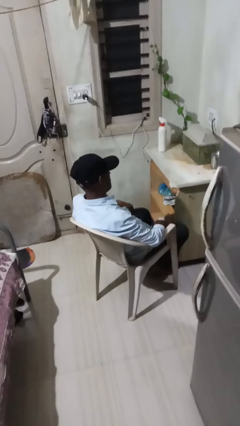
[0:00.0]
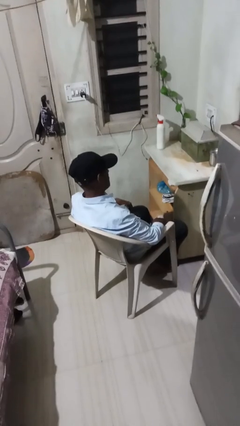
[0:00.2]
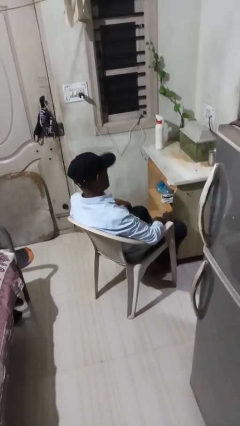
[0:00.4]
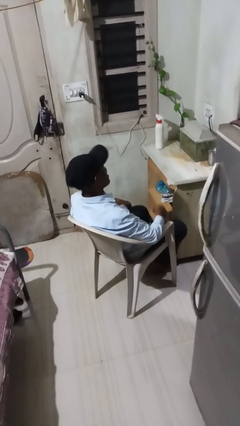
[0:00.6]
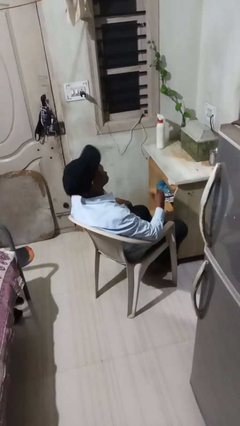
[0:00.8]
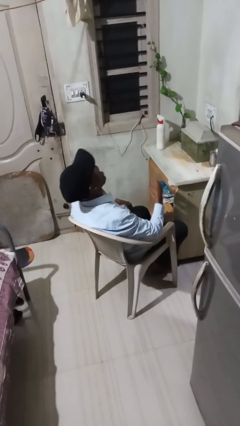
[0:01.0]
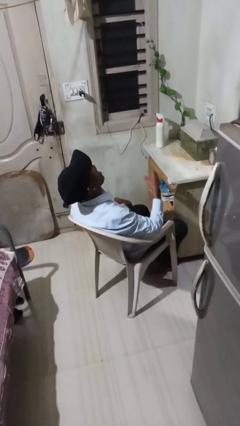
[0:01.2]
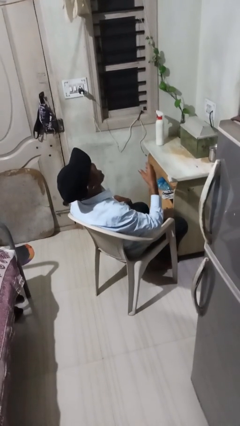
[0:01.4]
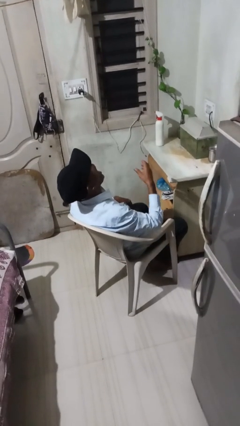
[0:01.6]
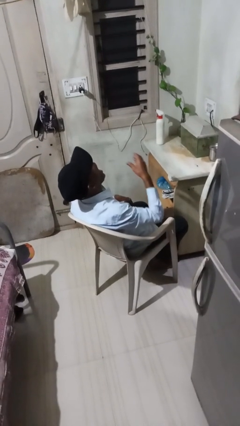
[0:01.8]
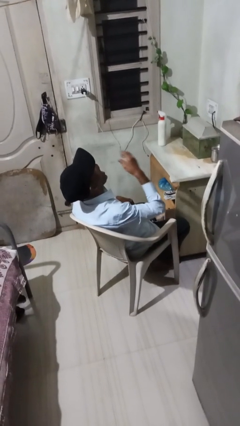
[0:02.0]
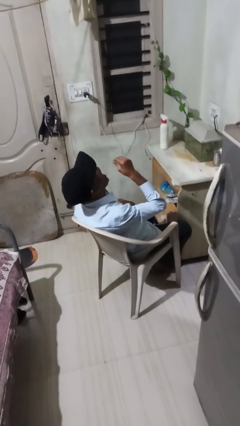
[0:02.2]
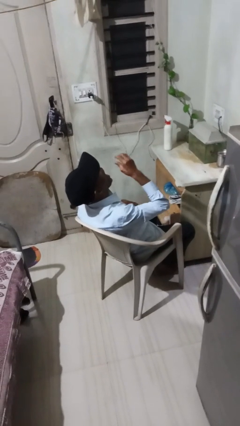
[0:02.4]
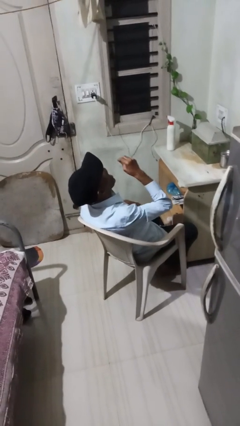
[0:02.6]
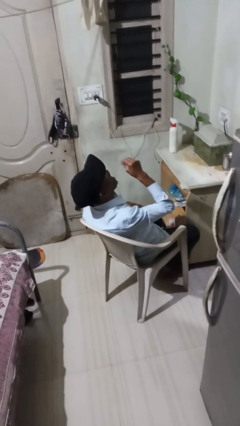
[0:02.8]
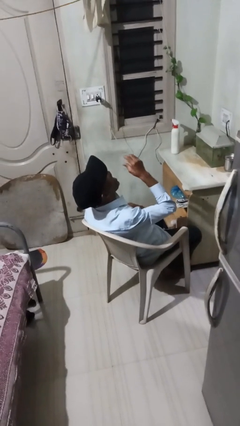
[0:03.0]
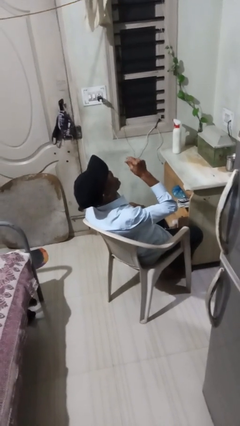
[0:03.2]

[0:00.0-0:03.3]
person yawns

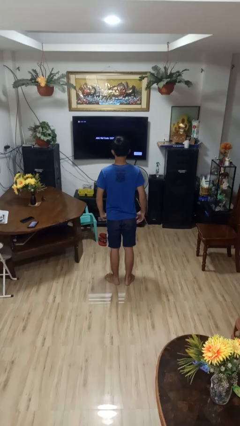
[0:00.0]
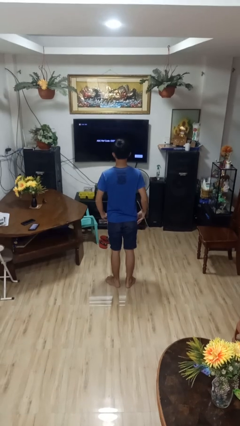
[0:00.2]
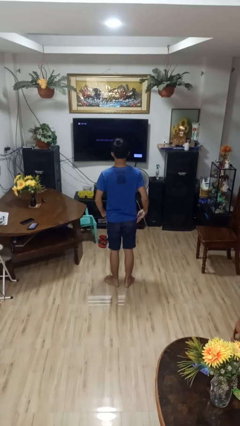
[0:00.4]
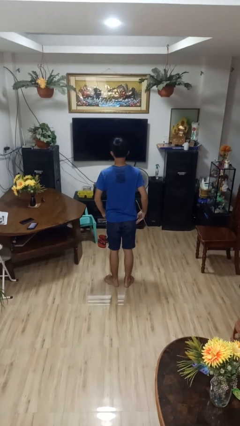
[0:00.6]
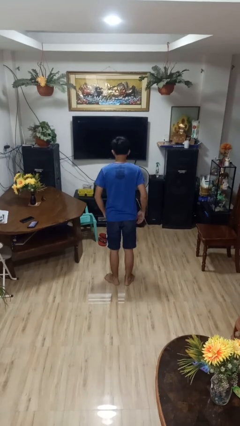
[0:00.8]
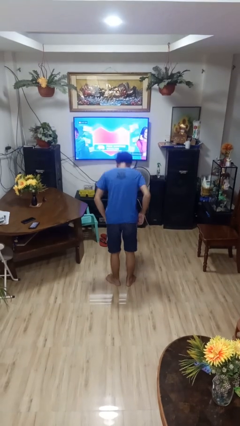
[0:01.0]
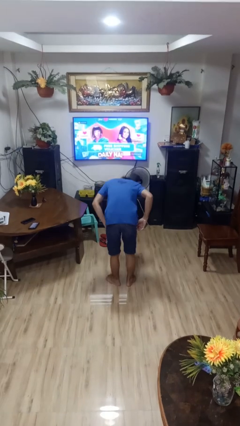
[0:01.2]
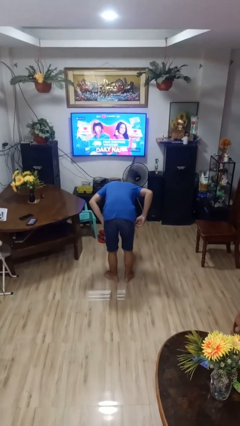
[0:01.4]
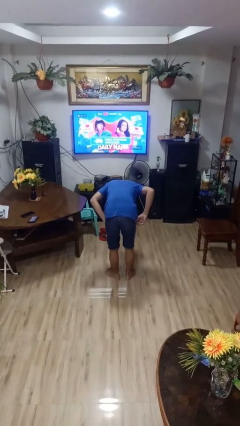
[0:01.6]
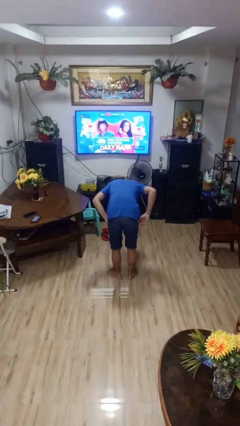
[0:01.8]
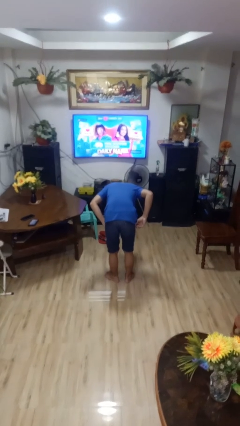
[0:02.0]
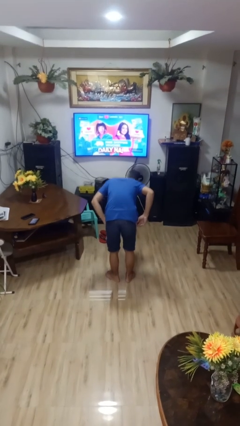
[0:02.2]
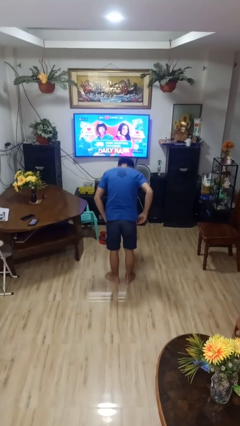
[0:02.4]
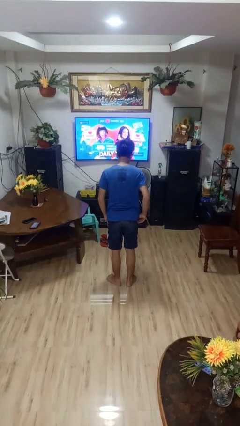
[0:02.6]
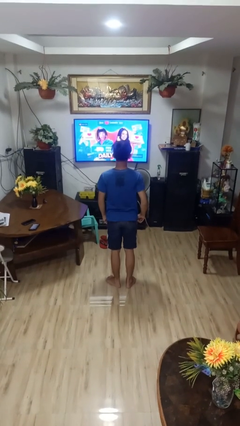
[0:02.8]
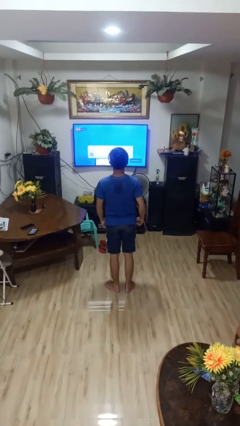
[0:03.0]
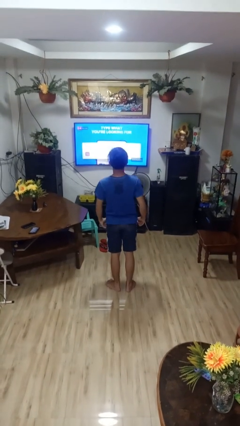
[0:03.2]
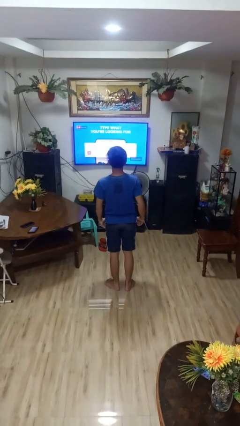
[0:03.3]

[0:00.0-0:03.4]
person bows

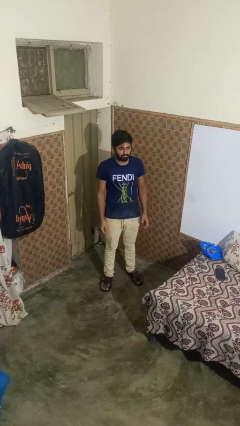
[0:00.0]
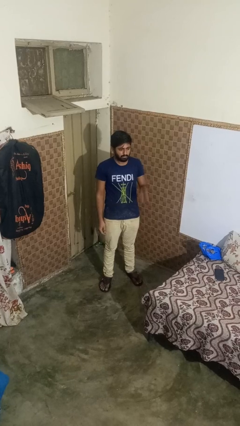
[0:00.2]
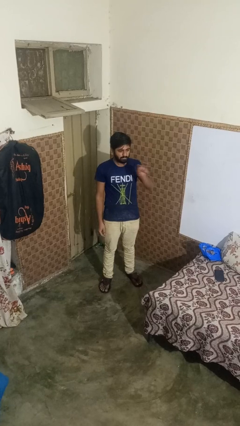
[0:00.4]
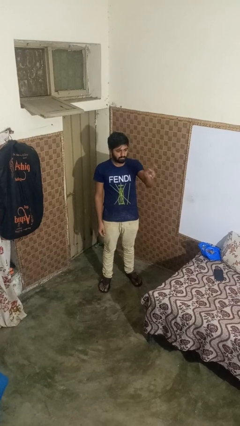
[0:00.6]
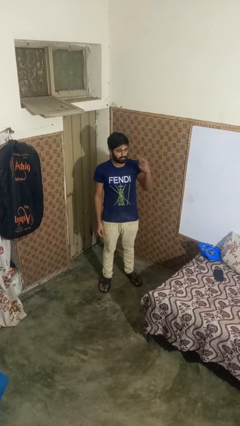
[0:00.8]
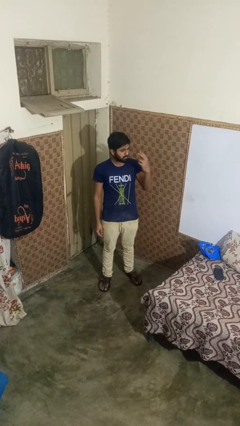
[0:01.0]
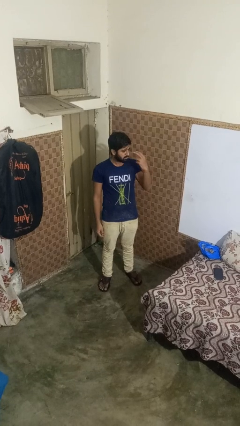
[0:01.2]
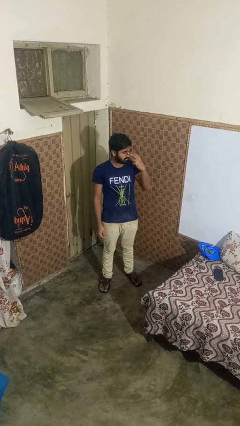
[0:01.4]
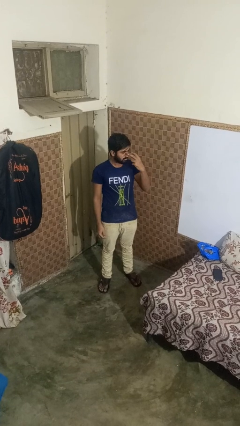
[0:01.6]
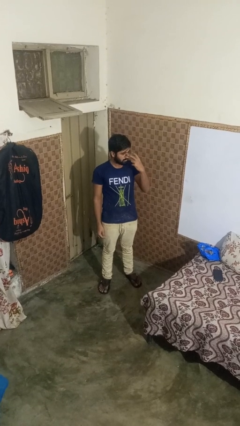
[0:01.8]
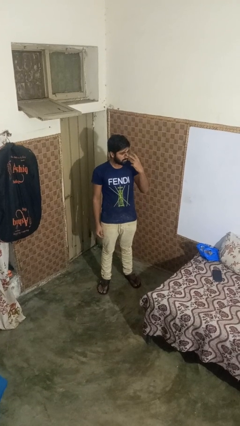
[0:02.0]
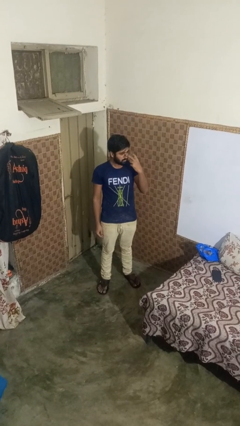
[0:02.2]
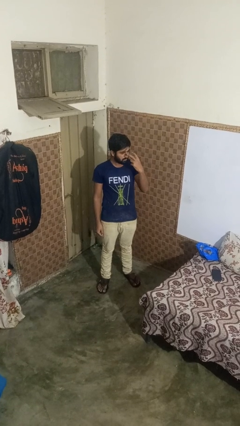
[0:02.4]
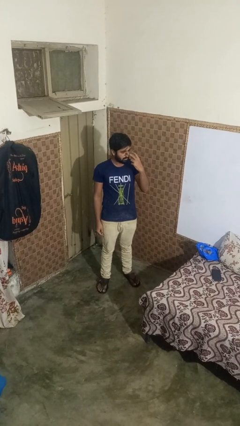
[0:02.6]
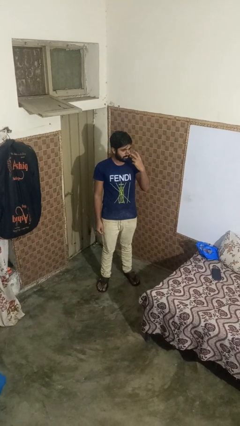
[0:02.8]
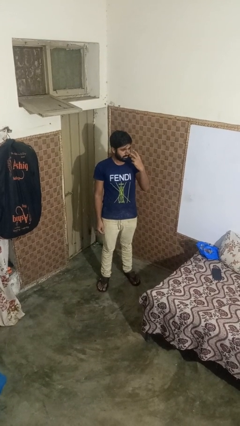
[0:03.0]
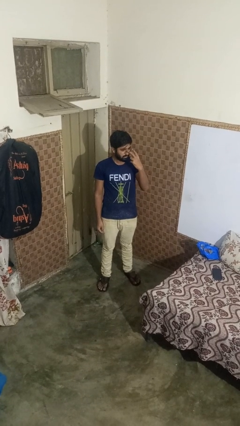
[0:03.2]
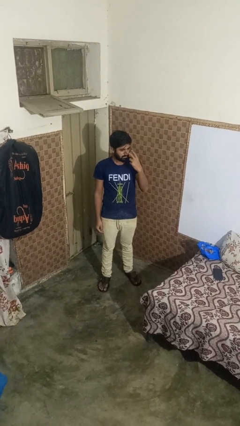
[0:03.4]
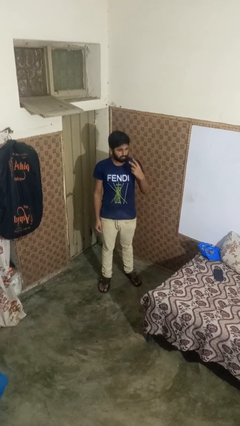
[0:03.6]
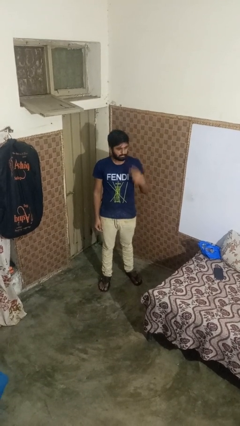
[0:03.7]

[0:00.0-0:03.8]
person gestures watch closely

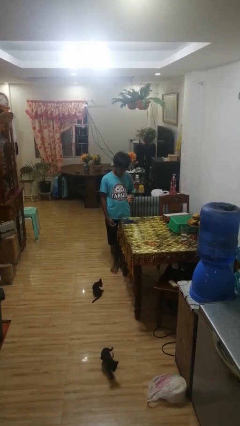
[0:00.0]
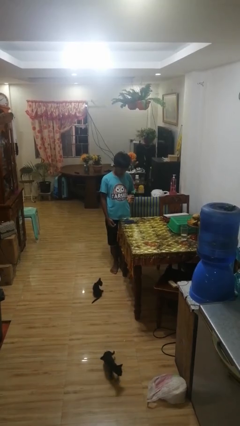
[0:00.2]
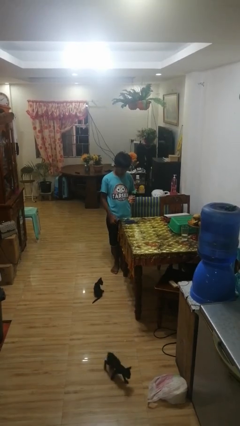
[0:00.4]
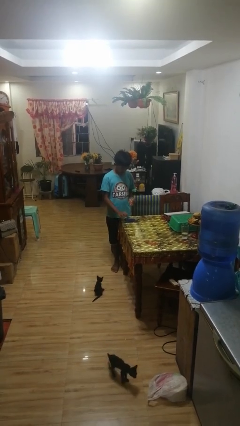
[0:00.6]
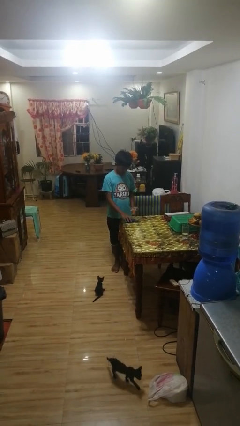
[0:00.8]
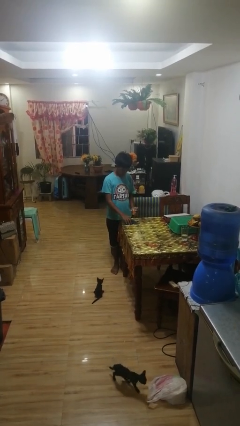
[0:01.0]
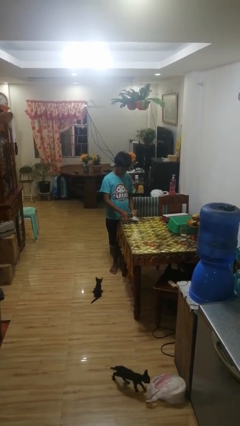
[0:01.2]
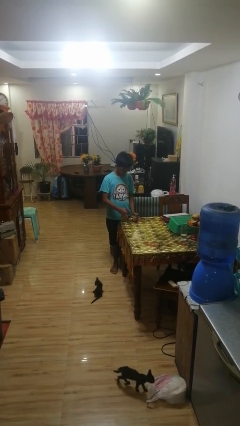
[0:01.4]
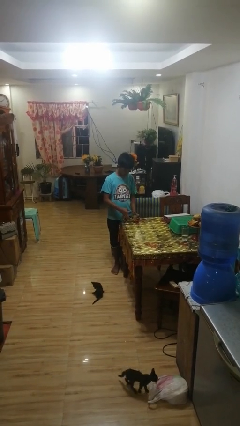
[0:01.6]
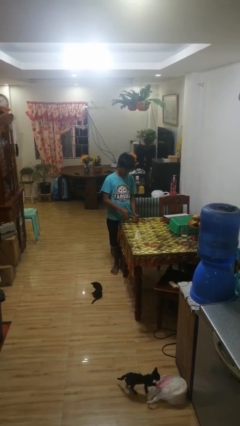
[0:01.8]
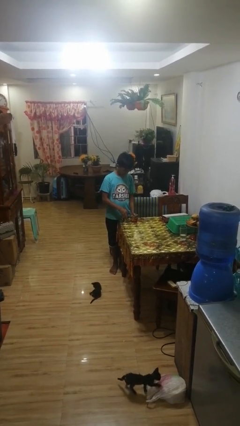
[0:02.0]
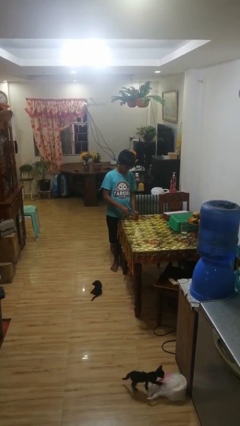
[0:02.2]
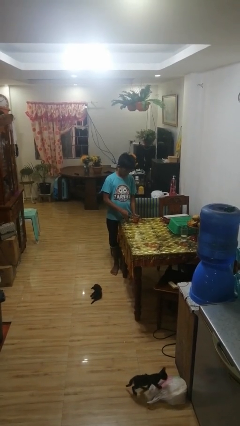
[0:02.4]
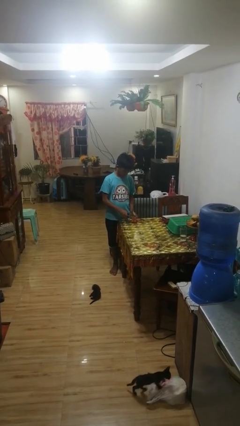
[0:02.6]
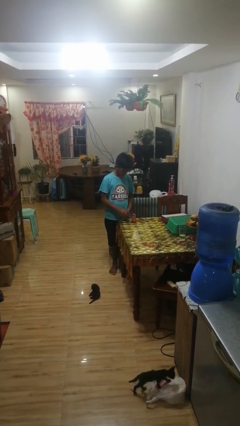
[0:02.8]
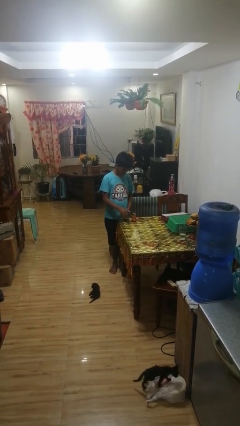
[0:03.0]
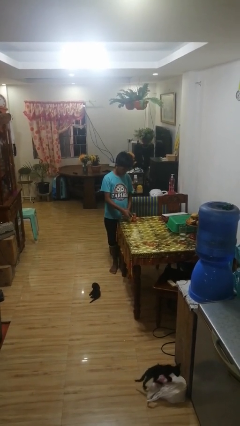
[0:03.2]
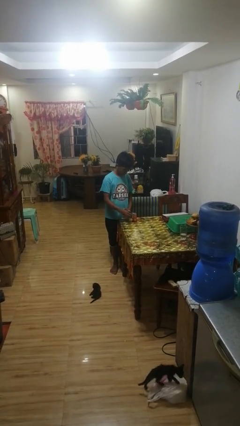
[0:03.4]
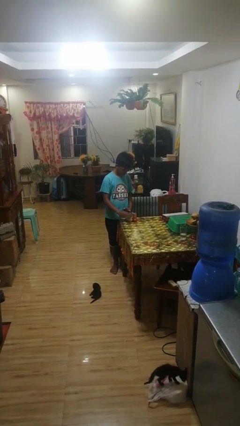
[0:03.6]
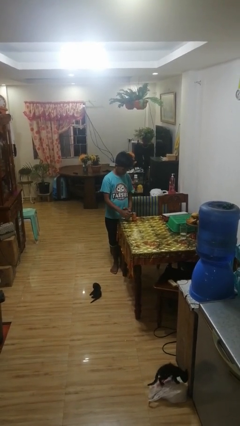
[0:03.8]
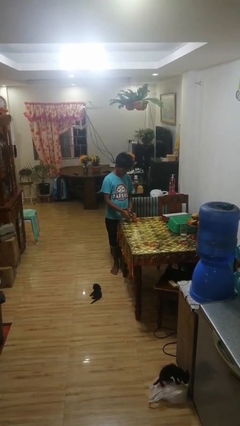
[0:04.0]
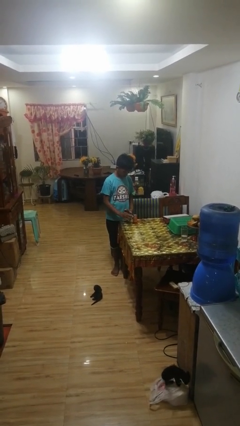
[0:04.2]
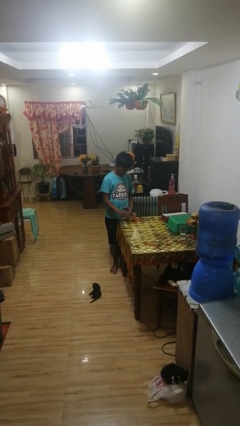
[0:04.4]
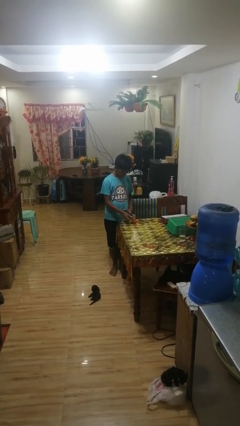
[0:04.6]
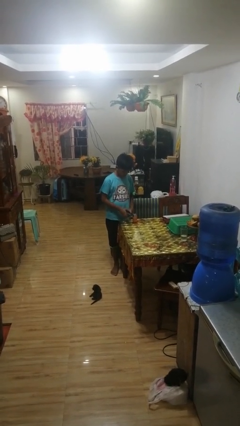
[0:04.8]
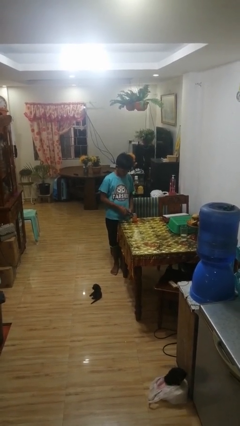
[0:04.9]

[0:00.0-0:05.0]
person opens can with can opener

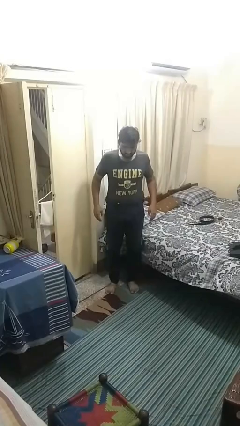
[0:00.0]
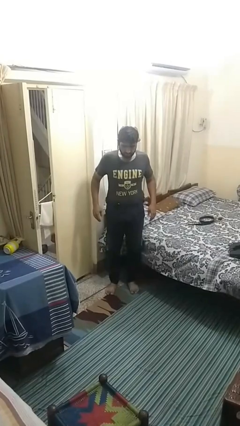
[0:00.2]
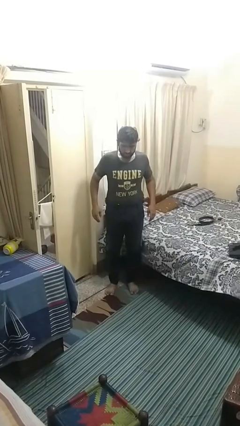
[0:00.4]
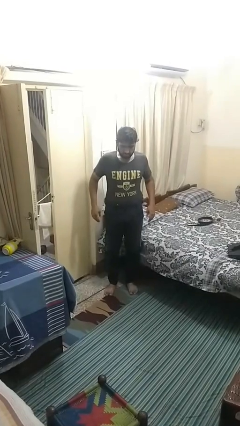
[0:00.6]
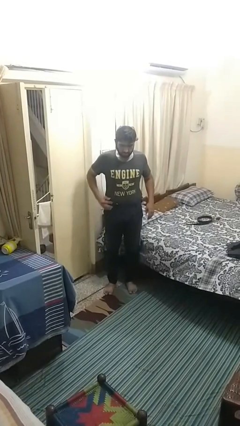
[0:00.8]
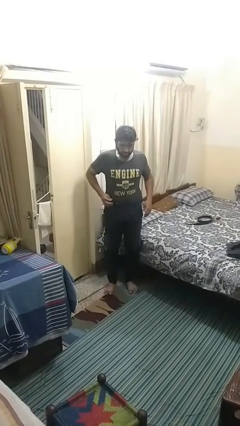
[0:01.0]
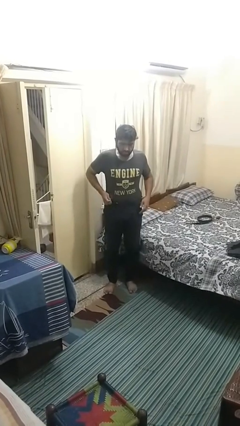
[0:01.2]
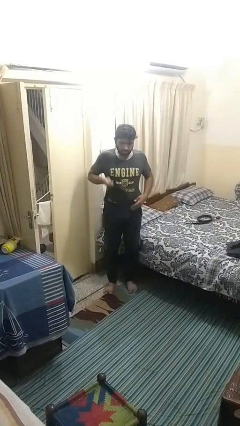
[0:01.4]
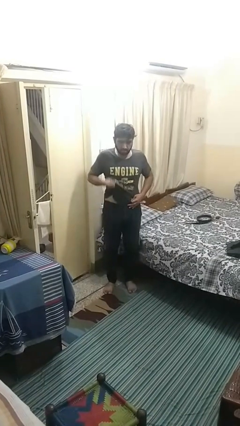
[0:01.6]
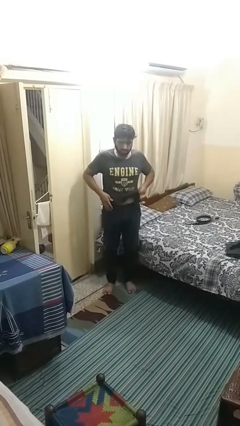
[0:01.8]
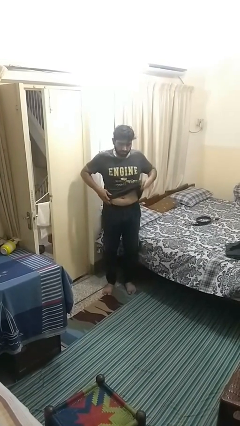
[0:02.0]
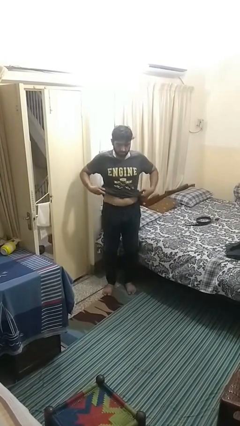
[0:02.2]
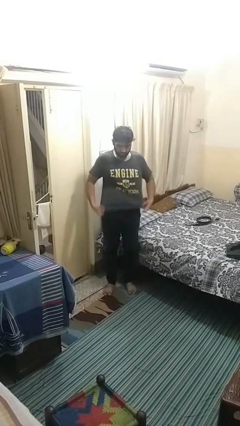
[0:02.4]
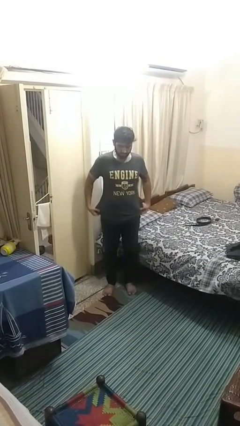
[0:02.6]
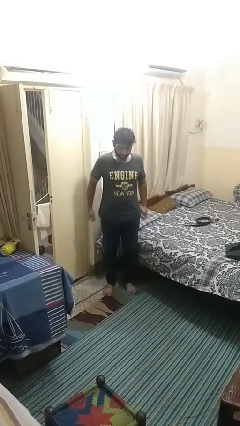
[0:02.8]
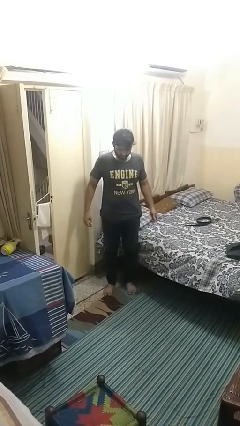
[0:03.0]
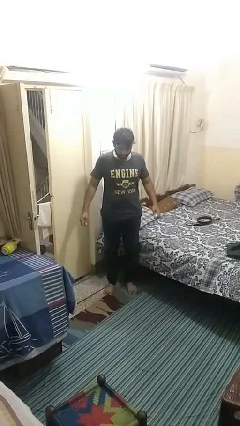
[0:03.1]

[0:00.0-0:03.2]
person untucks shirt
